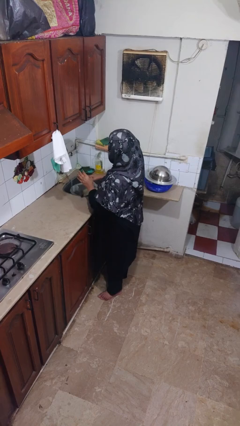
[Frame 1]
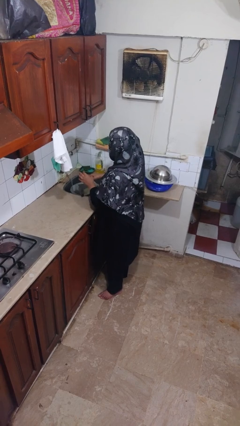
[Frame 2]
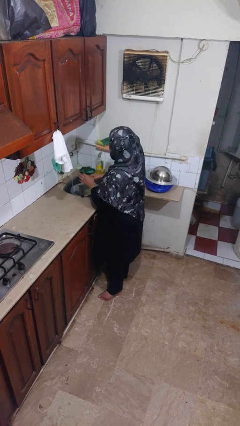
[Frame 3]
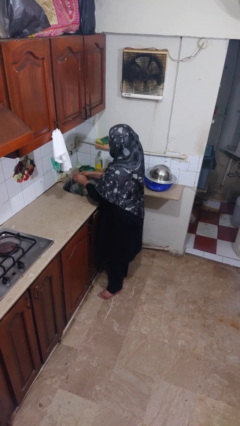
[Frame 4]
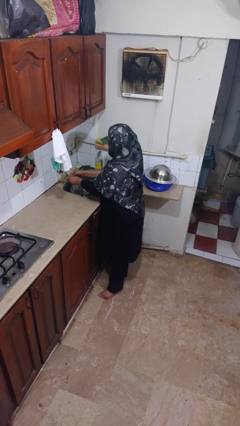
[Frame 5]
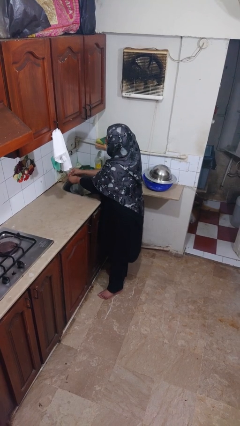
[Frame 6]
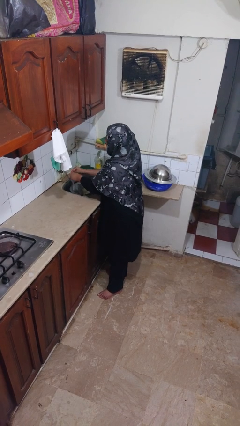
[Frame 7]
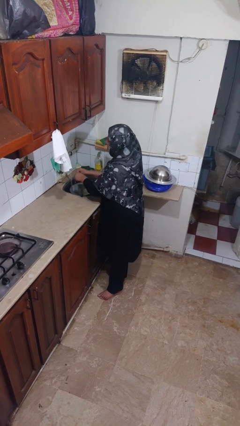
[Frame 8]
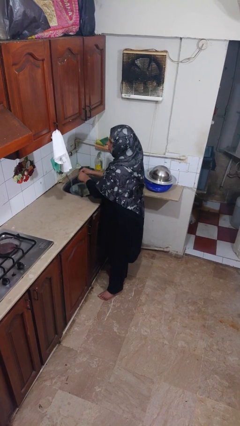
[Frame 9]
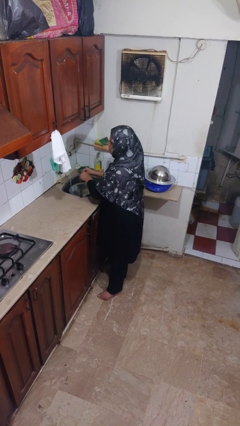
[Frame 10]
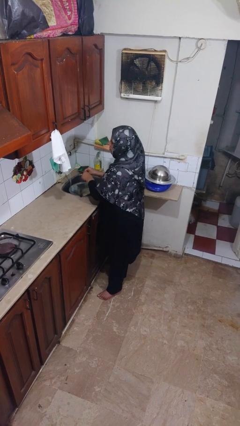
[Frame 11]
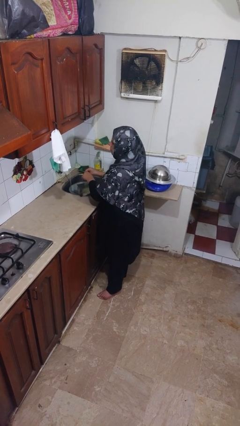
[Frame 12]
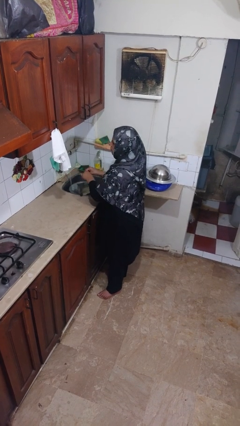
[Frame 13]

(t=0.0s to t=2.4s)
person washes hands

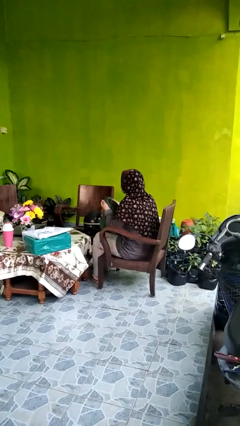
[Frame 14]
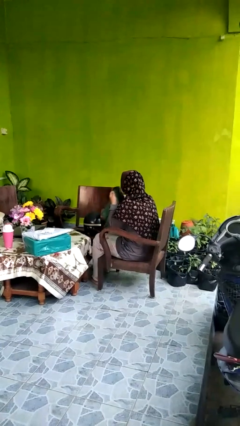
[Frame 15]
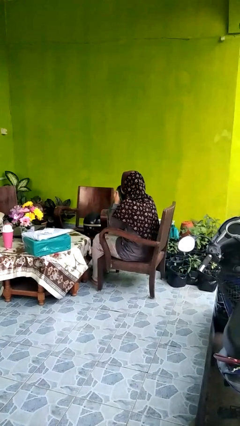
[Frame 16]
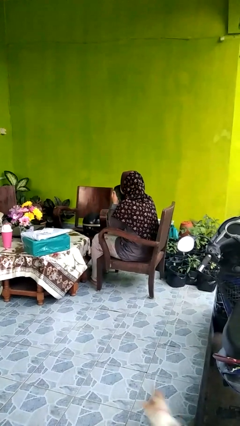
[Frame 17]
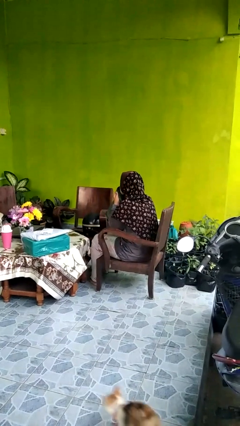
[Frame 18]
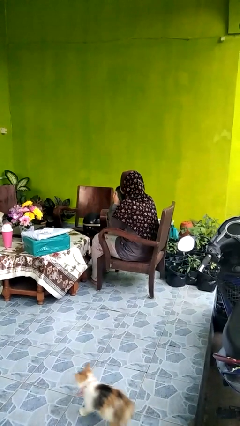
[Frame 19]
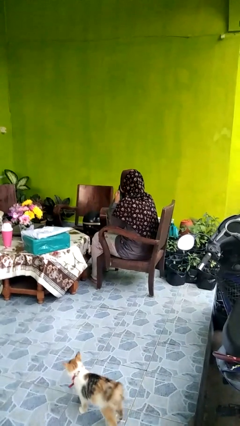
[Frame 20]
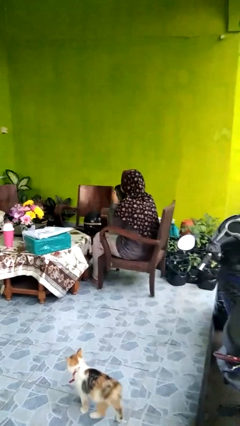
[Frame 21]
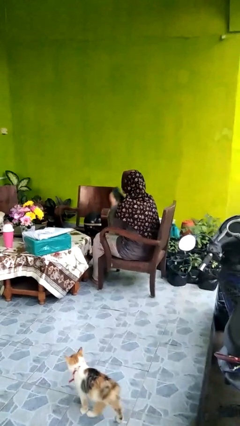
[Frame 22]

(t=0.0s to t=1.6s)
person wipes mouth with napkin

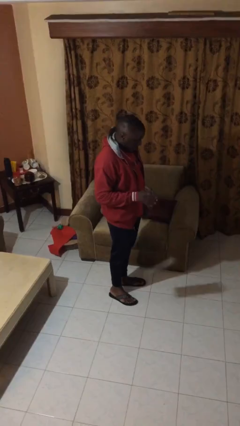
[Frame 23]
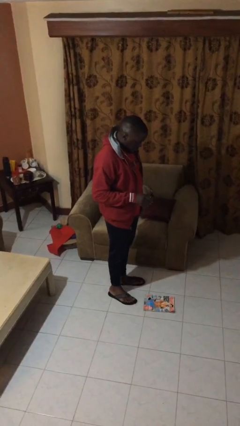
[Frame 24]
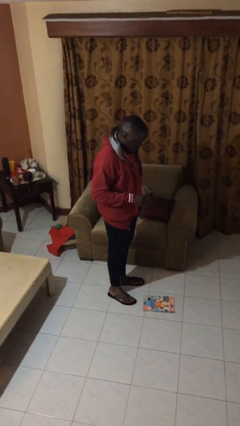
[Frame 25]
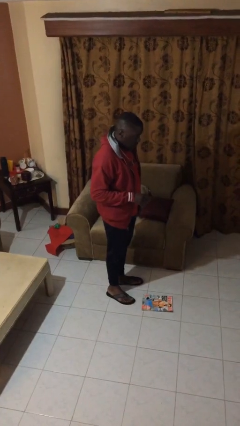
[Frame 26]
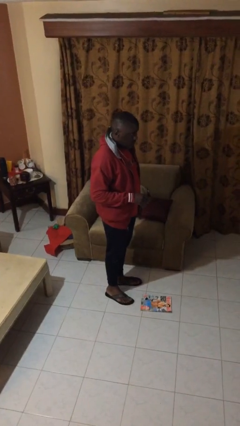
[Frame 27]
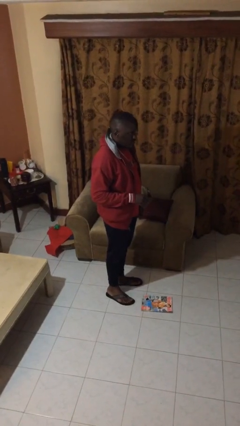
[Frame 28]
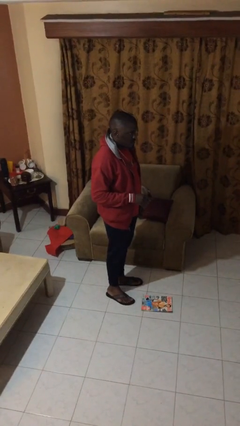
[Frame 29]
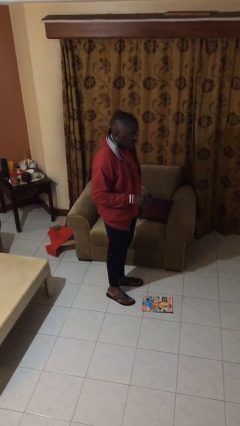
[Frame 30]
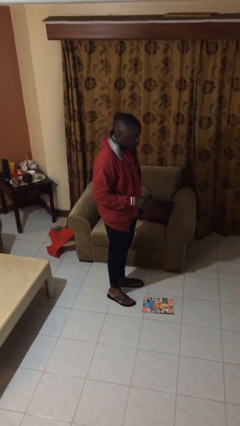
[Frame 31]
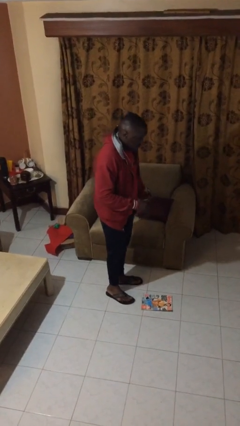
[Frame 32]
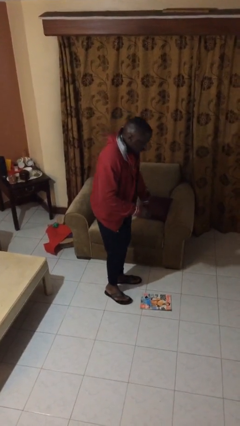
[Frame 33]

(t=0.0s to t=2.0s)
person drops object

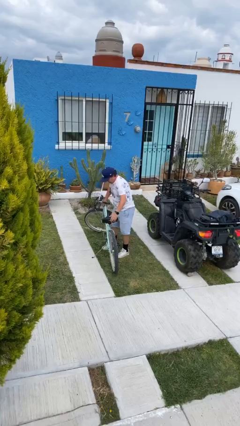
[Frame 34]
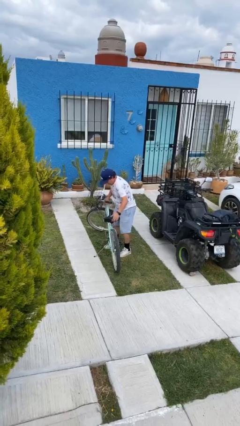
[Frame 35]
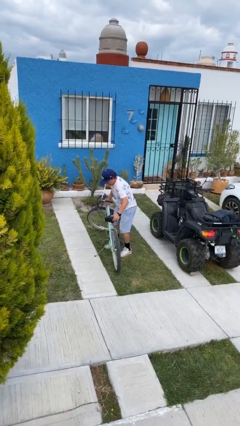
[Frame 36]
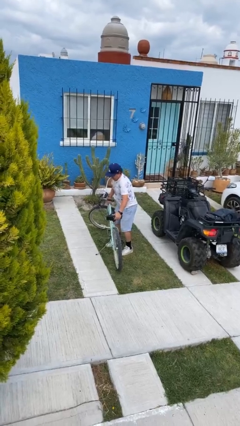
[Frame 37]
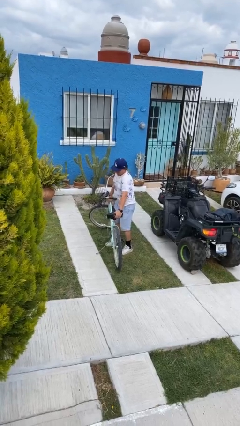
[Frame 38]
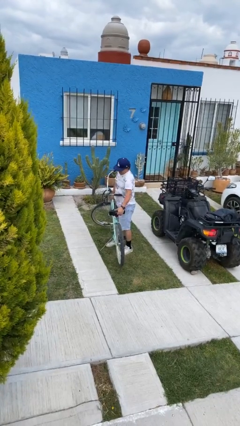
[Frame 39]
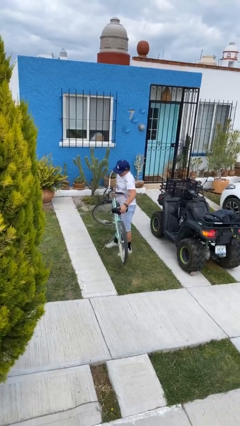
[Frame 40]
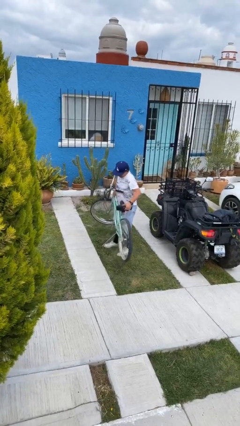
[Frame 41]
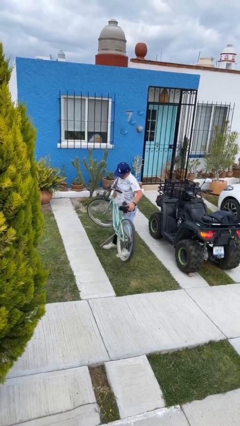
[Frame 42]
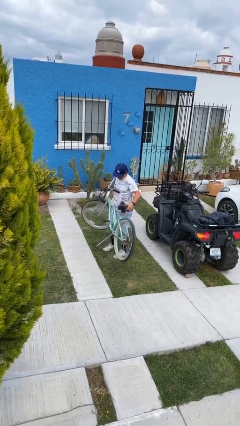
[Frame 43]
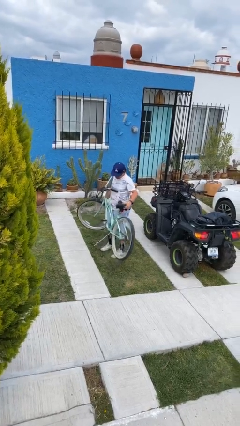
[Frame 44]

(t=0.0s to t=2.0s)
person picks up object from floor

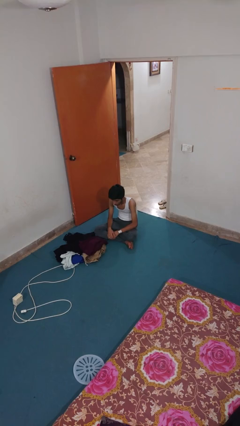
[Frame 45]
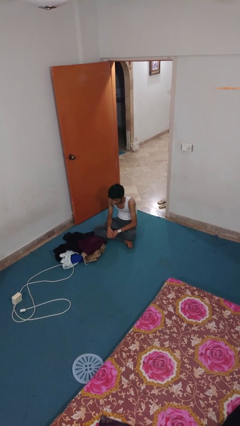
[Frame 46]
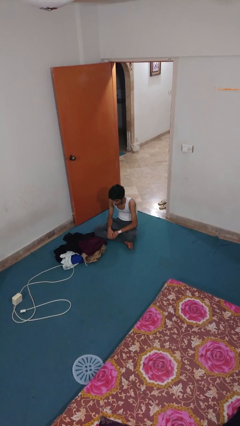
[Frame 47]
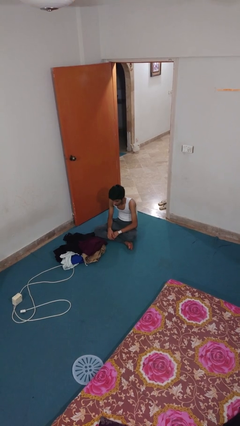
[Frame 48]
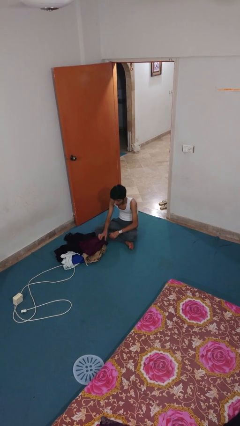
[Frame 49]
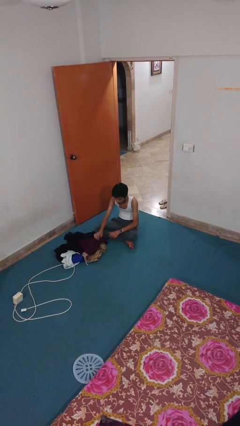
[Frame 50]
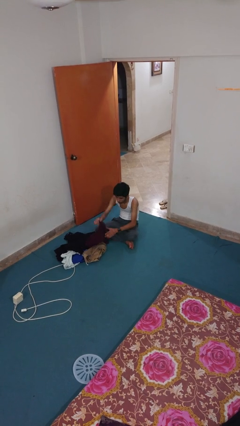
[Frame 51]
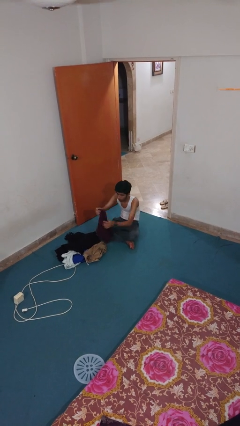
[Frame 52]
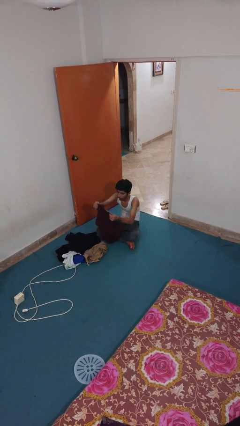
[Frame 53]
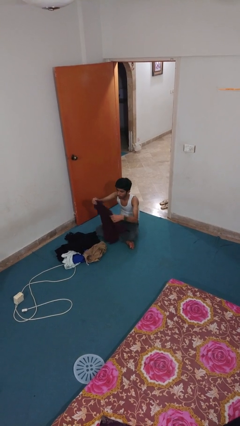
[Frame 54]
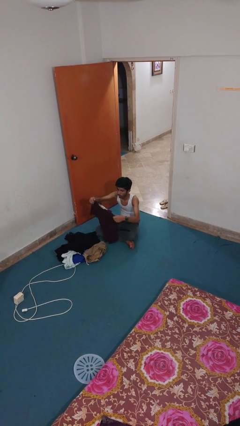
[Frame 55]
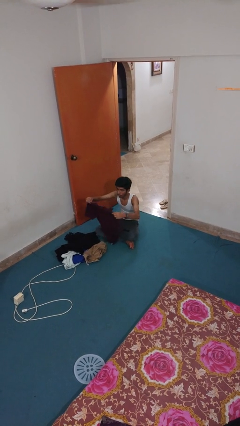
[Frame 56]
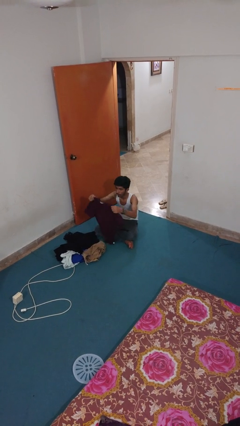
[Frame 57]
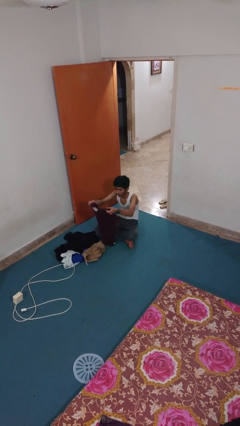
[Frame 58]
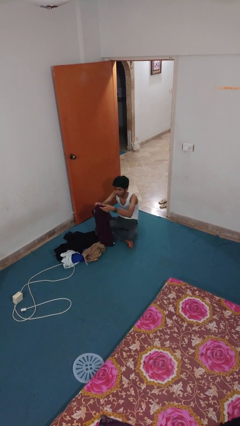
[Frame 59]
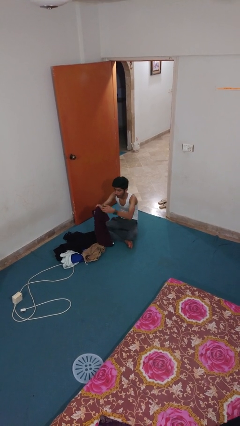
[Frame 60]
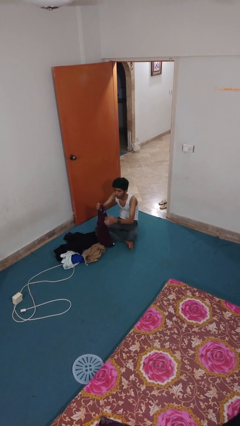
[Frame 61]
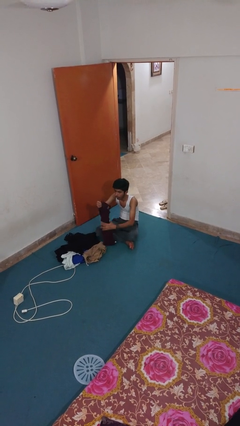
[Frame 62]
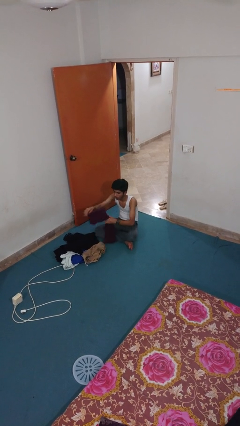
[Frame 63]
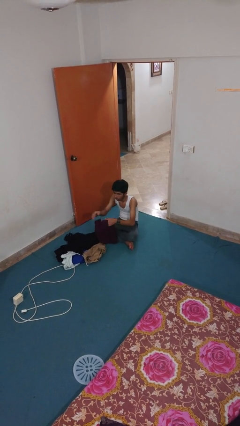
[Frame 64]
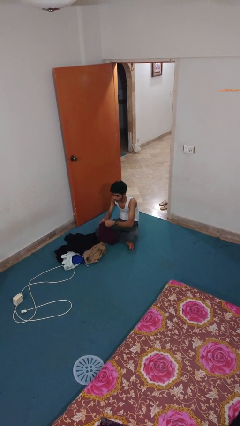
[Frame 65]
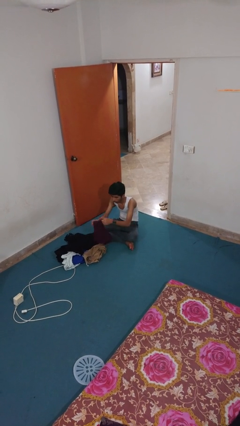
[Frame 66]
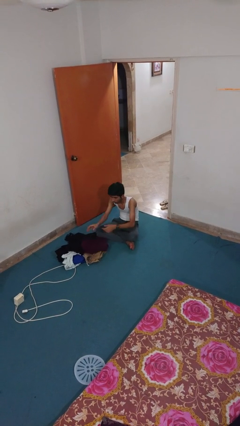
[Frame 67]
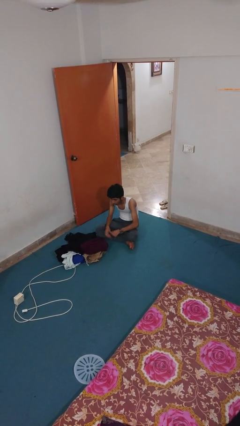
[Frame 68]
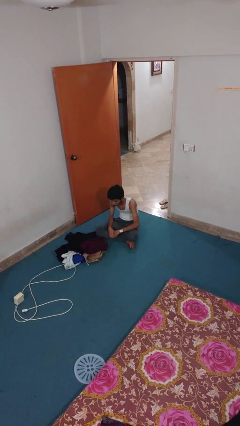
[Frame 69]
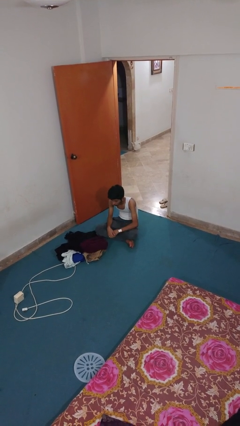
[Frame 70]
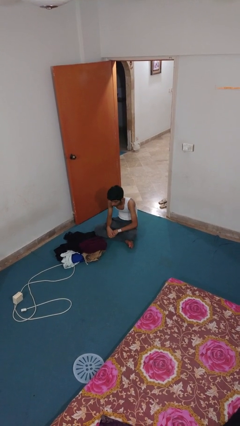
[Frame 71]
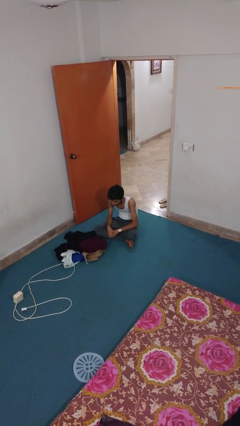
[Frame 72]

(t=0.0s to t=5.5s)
person folds shirt

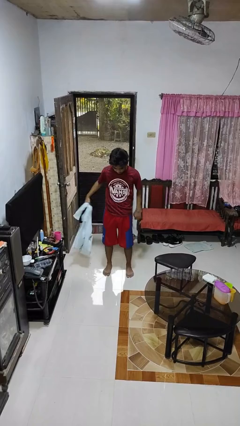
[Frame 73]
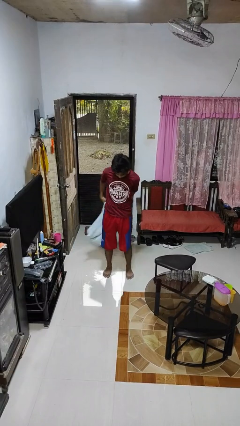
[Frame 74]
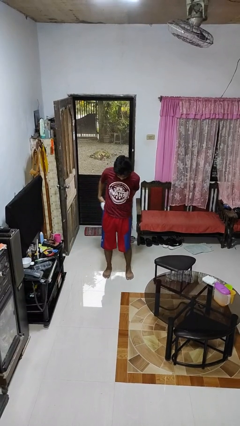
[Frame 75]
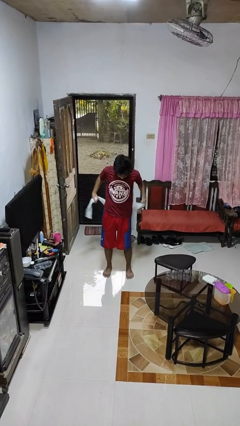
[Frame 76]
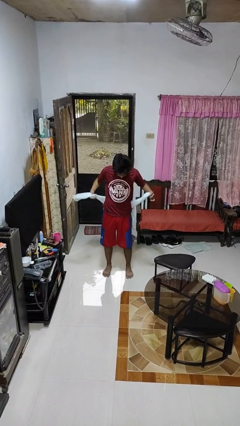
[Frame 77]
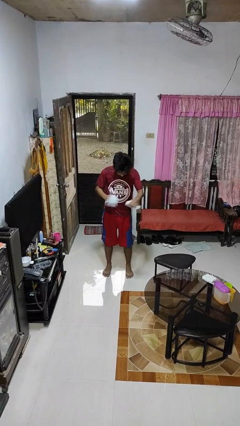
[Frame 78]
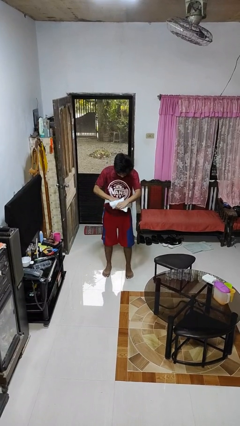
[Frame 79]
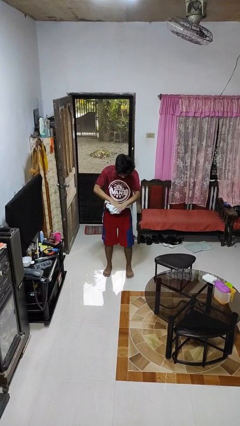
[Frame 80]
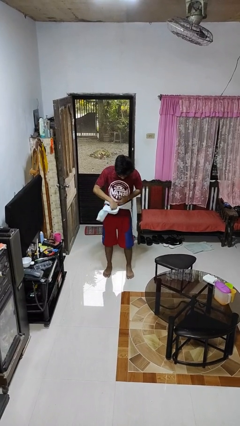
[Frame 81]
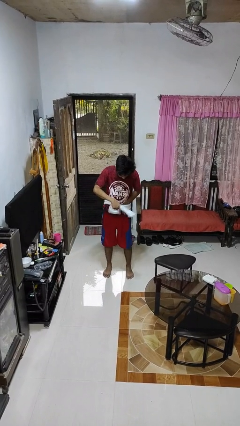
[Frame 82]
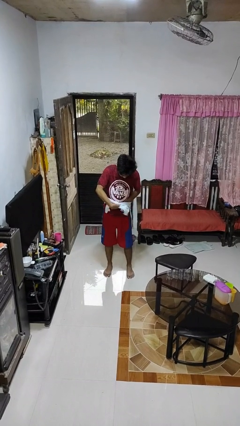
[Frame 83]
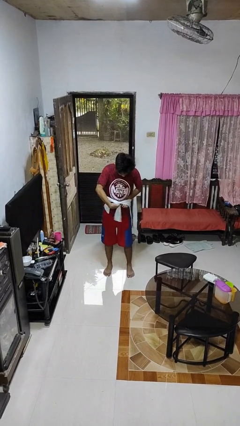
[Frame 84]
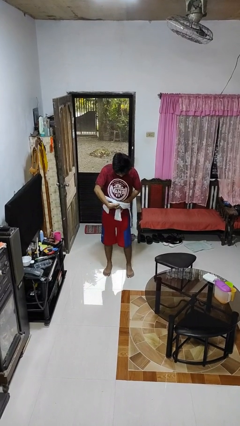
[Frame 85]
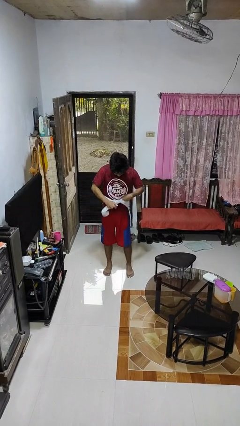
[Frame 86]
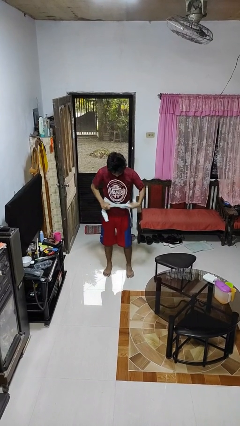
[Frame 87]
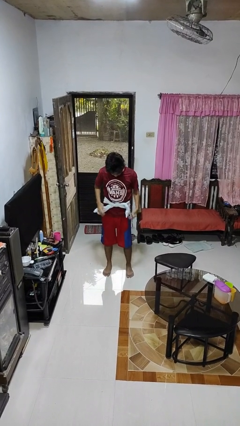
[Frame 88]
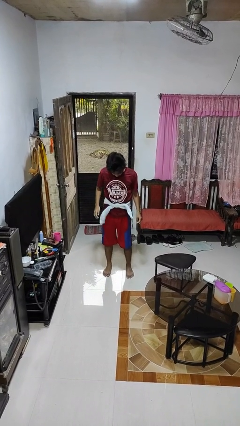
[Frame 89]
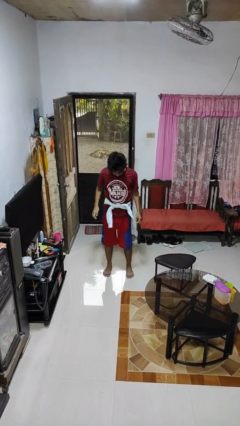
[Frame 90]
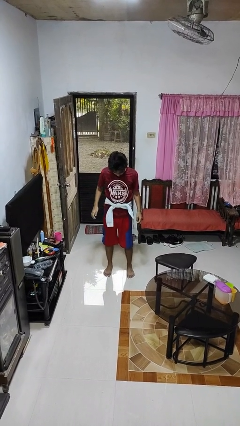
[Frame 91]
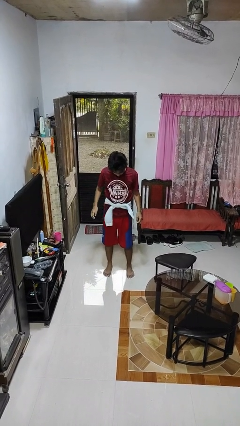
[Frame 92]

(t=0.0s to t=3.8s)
person ties jacket around waist
